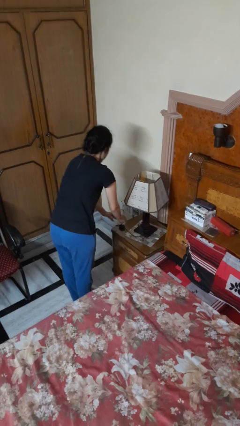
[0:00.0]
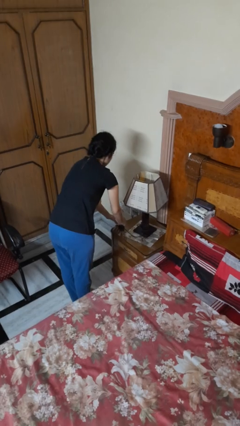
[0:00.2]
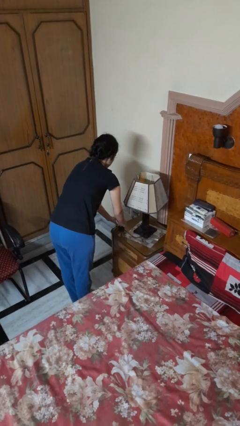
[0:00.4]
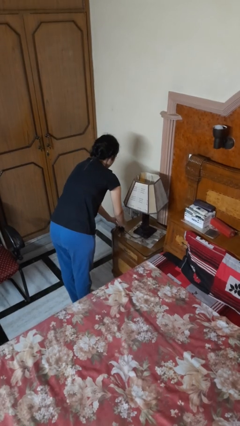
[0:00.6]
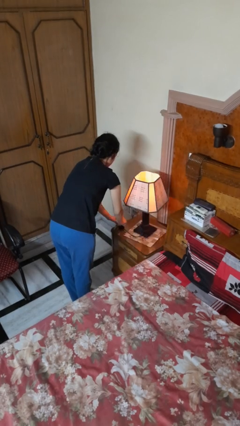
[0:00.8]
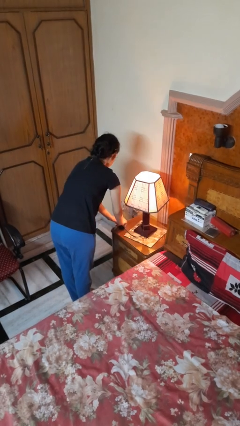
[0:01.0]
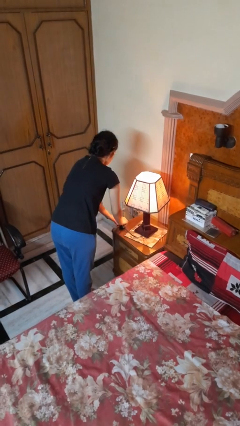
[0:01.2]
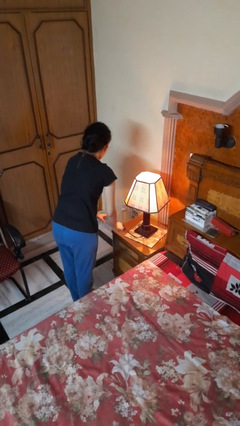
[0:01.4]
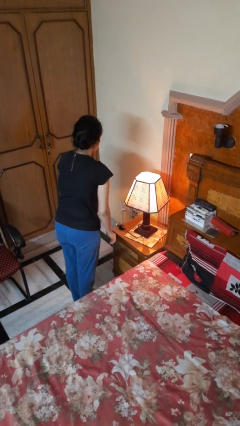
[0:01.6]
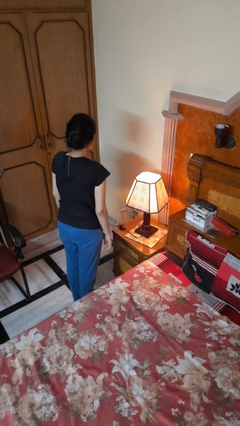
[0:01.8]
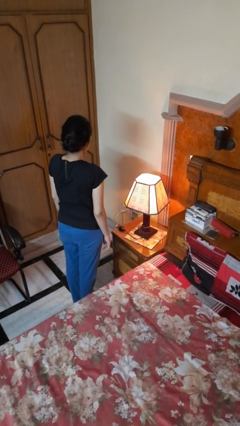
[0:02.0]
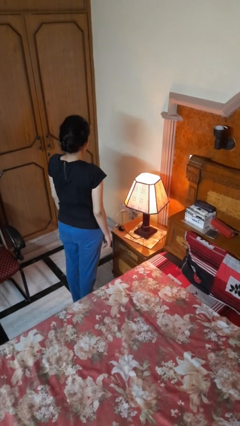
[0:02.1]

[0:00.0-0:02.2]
person turns on lamp

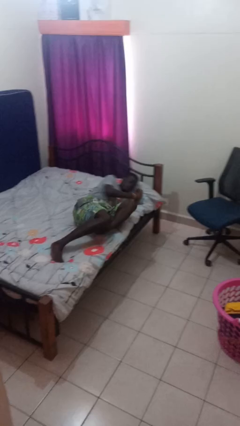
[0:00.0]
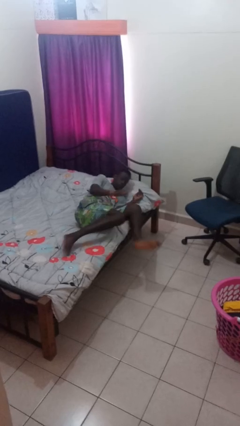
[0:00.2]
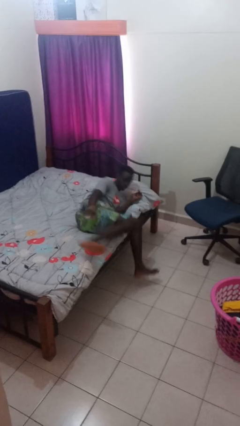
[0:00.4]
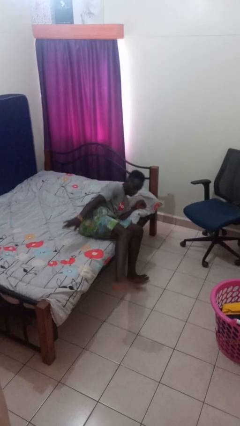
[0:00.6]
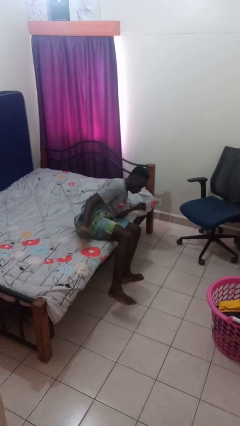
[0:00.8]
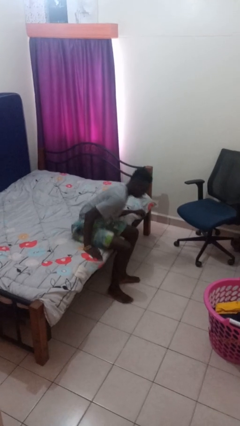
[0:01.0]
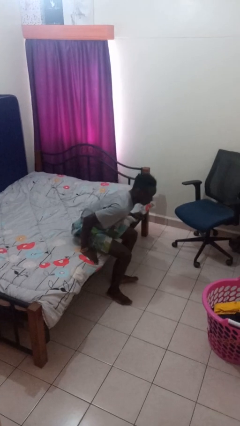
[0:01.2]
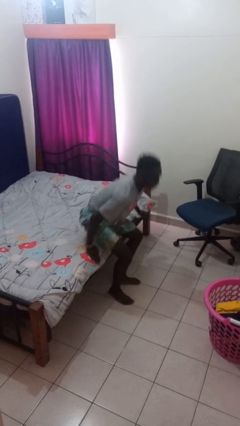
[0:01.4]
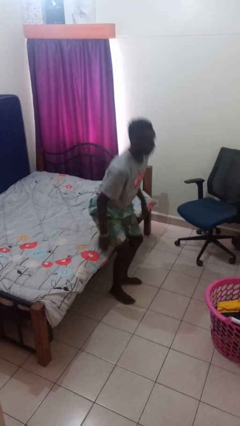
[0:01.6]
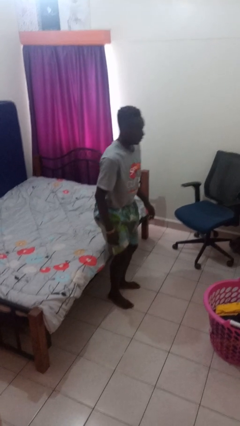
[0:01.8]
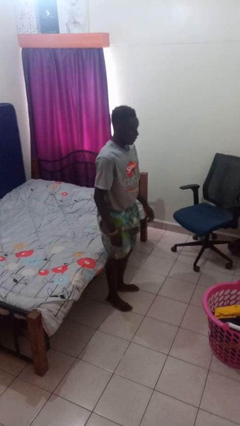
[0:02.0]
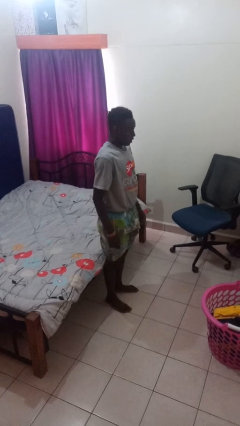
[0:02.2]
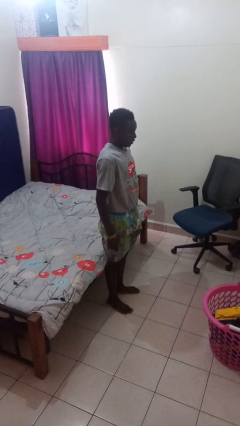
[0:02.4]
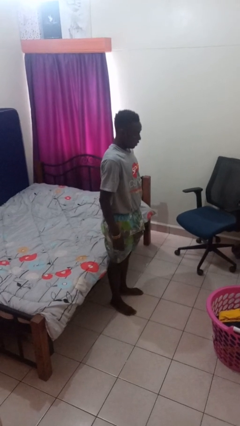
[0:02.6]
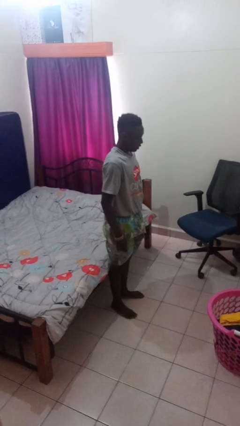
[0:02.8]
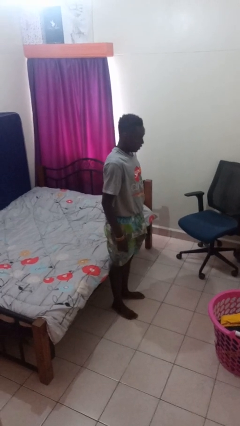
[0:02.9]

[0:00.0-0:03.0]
person stands up

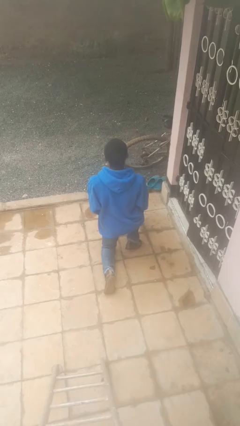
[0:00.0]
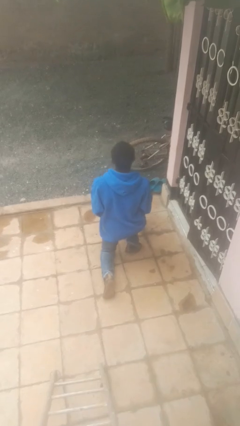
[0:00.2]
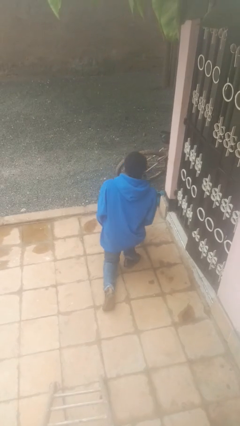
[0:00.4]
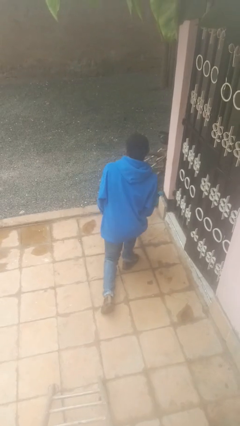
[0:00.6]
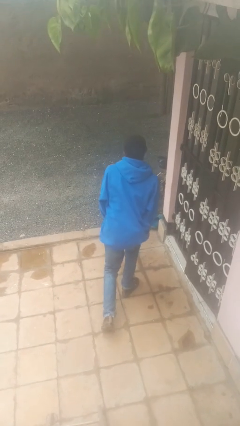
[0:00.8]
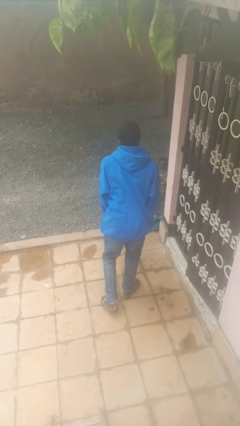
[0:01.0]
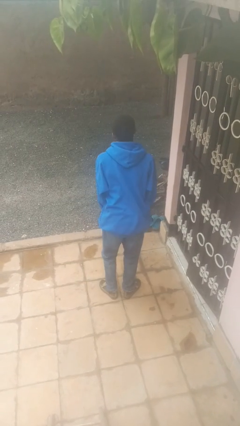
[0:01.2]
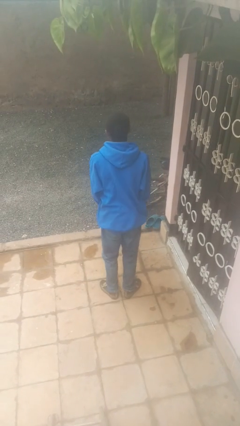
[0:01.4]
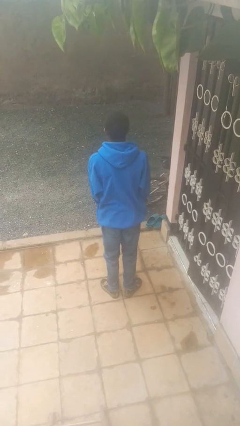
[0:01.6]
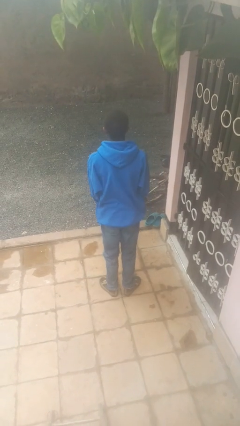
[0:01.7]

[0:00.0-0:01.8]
person stands up from floor

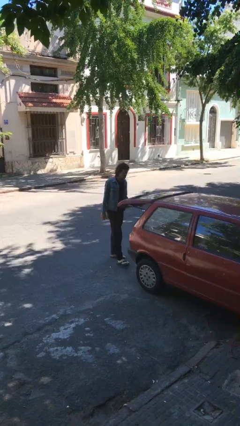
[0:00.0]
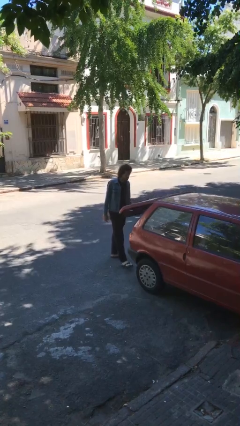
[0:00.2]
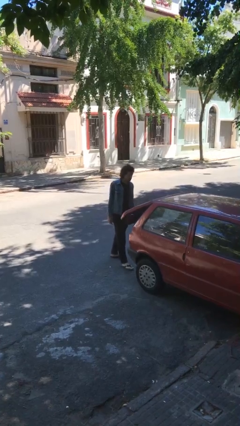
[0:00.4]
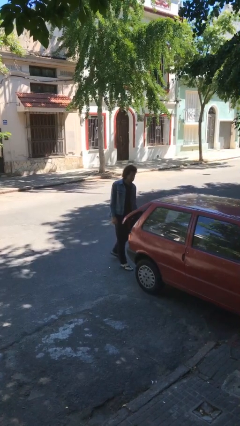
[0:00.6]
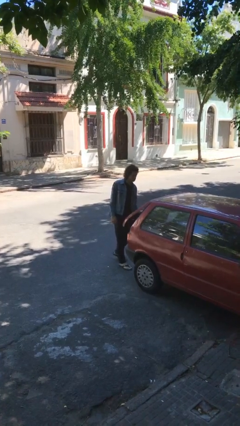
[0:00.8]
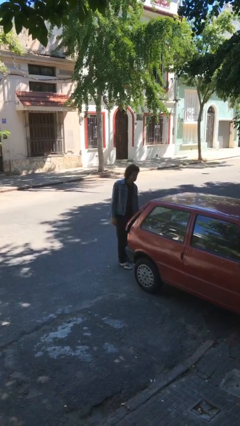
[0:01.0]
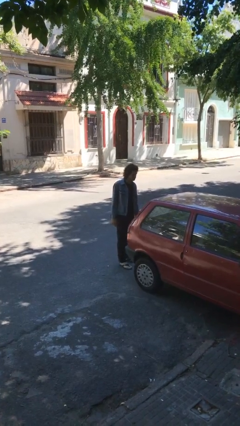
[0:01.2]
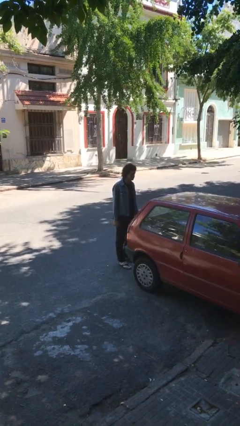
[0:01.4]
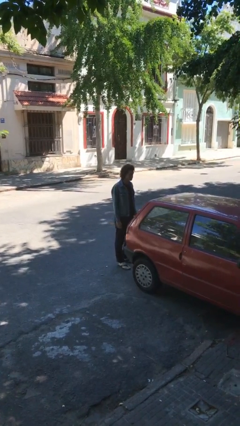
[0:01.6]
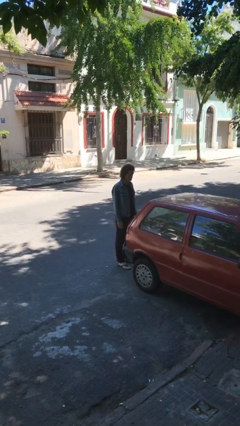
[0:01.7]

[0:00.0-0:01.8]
person closes car trunk

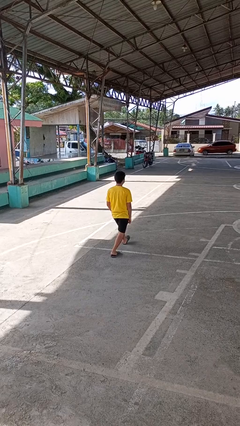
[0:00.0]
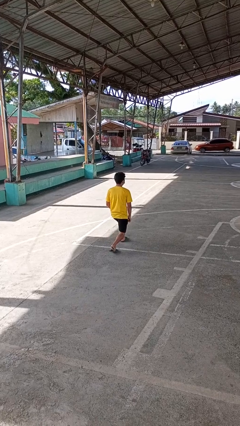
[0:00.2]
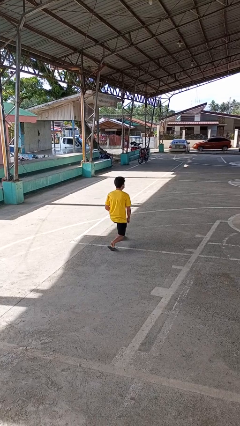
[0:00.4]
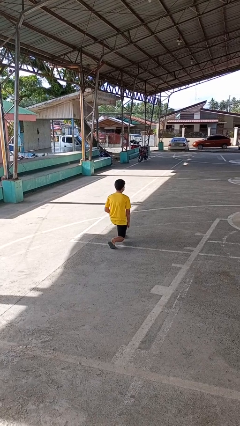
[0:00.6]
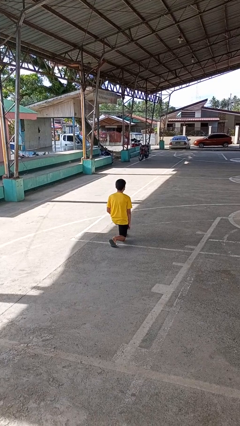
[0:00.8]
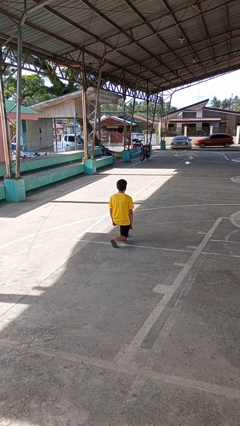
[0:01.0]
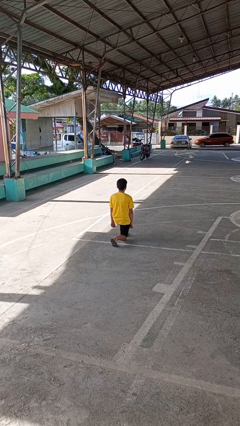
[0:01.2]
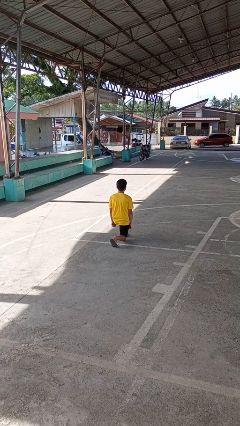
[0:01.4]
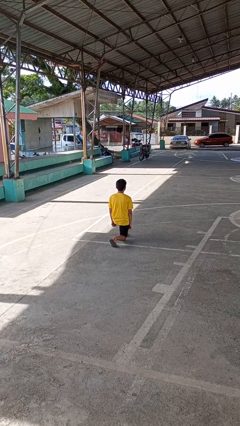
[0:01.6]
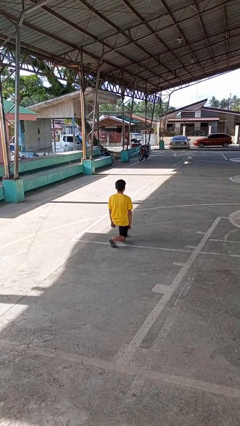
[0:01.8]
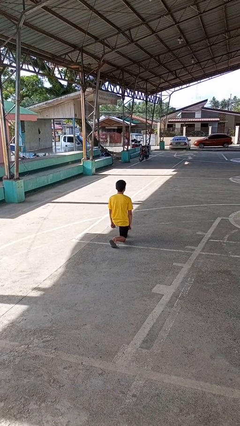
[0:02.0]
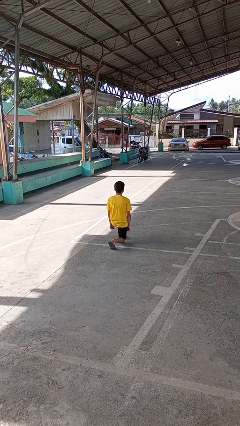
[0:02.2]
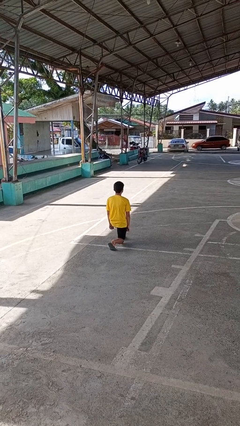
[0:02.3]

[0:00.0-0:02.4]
person kneels

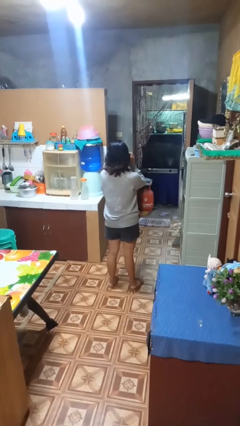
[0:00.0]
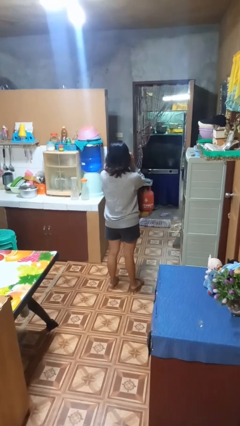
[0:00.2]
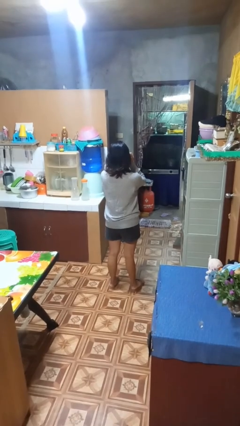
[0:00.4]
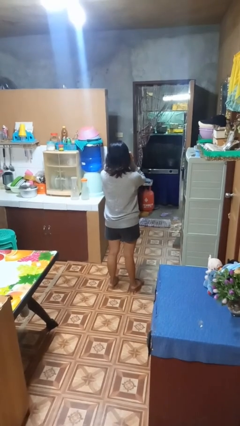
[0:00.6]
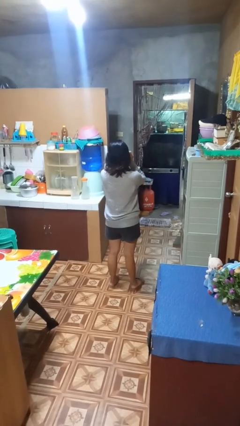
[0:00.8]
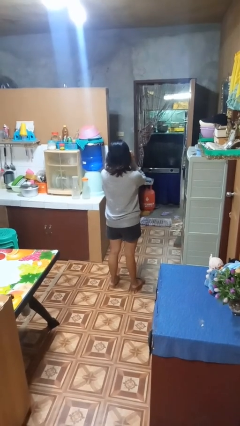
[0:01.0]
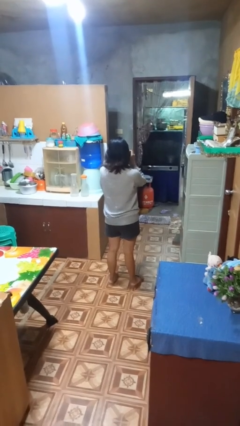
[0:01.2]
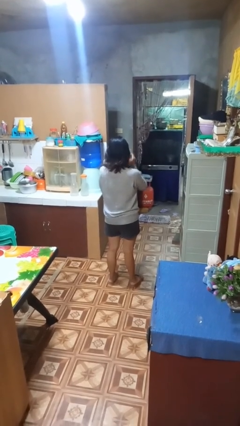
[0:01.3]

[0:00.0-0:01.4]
person drinks from mug

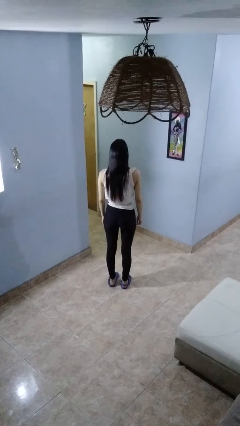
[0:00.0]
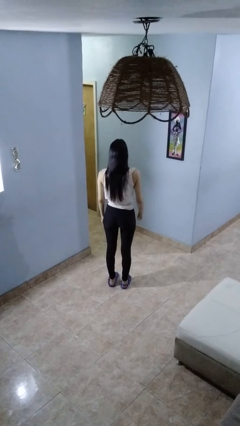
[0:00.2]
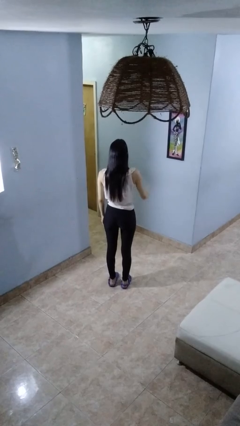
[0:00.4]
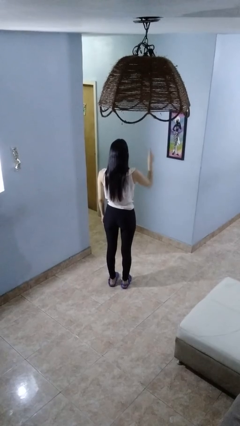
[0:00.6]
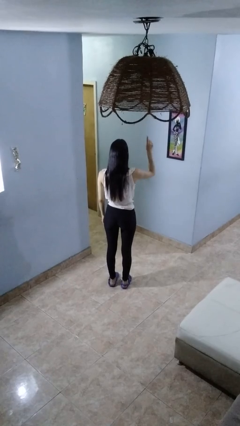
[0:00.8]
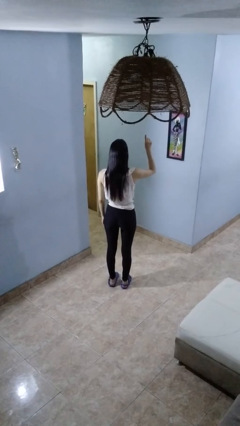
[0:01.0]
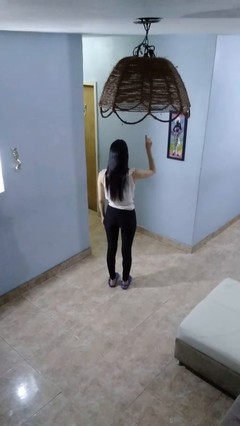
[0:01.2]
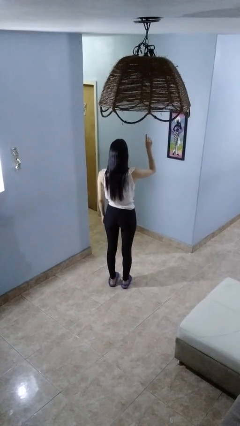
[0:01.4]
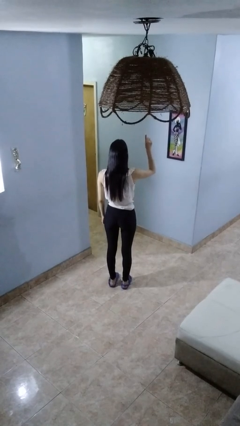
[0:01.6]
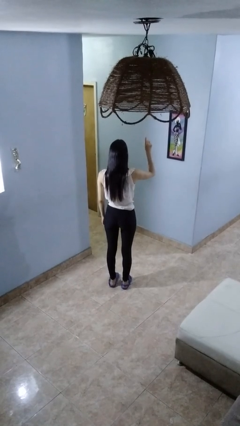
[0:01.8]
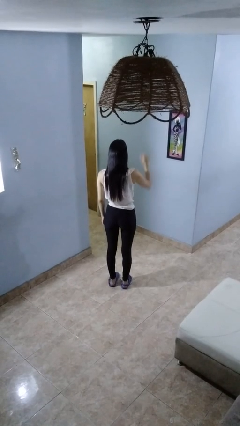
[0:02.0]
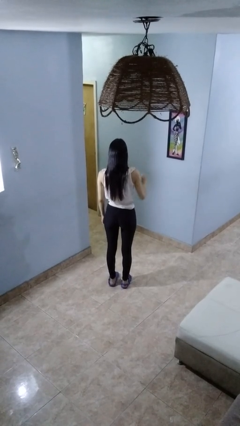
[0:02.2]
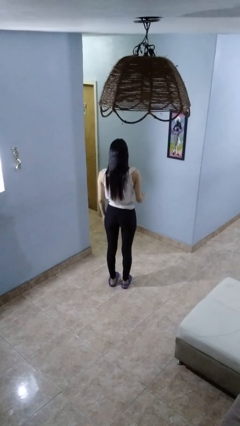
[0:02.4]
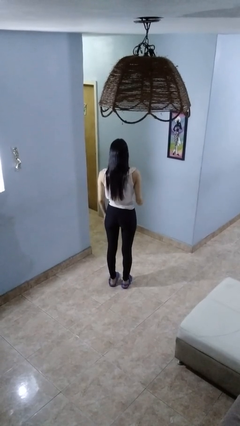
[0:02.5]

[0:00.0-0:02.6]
person gestures number one

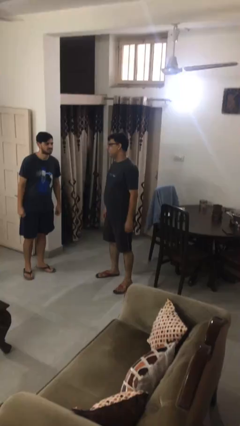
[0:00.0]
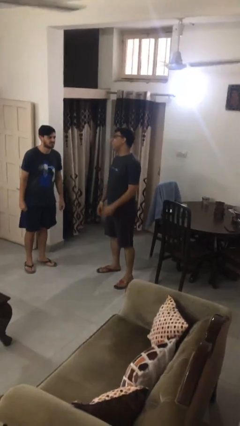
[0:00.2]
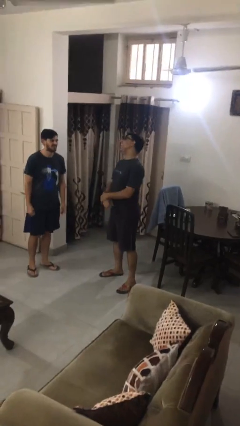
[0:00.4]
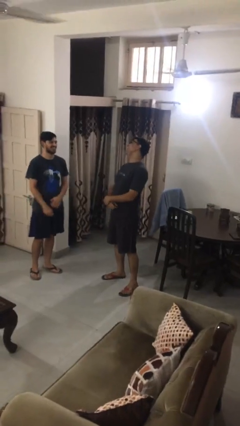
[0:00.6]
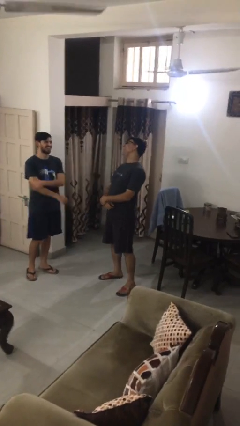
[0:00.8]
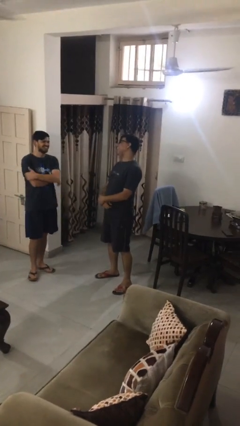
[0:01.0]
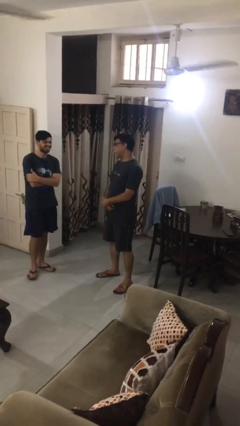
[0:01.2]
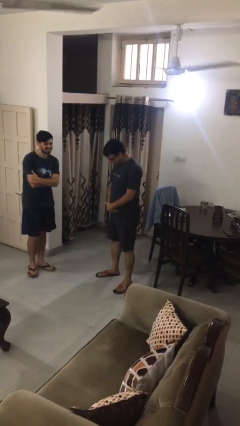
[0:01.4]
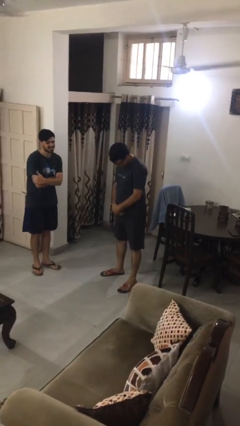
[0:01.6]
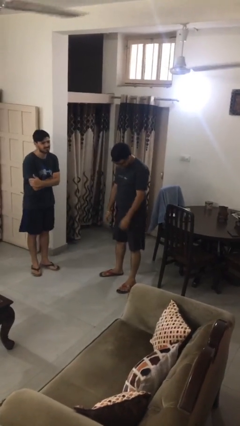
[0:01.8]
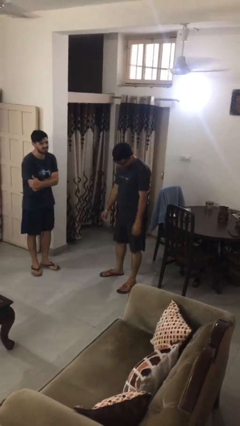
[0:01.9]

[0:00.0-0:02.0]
person laughs with person
